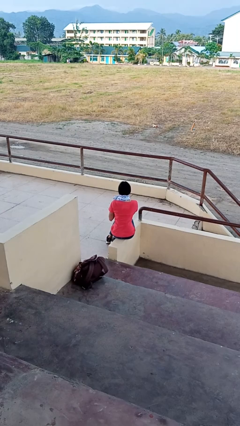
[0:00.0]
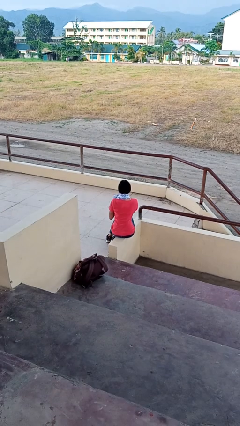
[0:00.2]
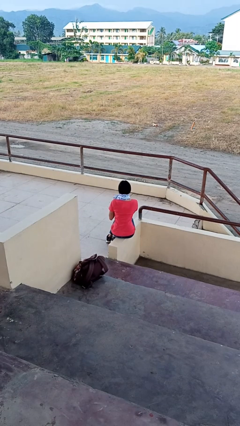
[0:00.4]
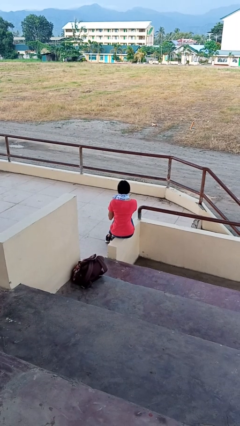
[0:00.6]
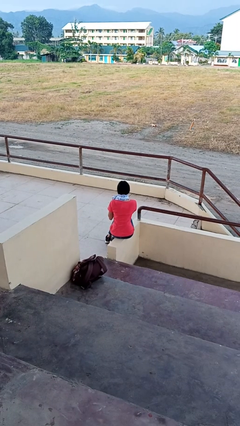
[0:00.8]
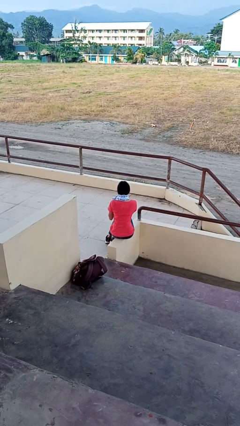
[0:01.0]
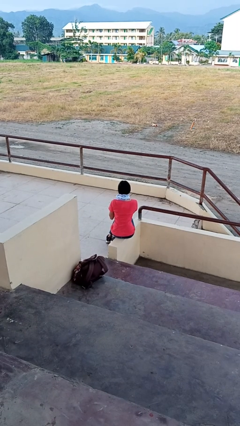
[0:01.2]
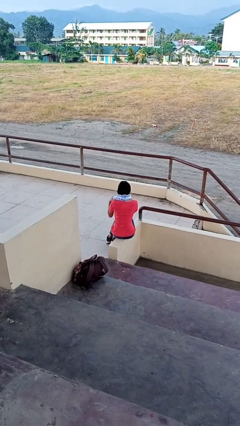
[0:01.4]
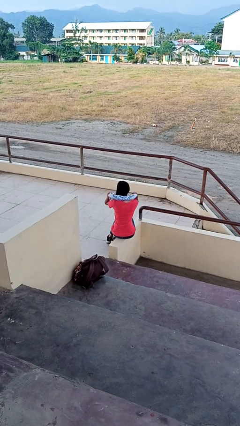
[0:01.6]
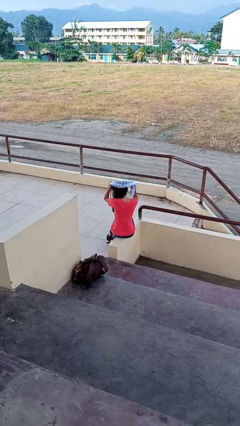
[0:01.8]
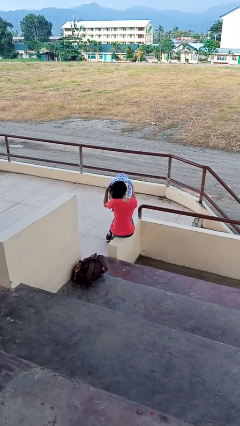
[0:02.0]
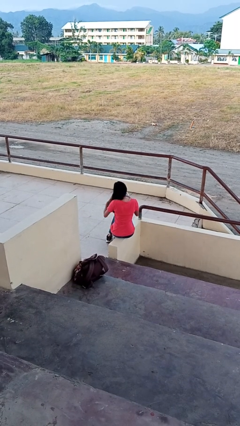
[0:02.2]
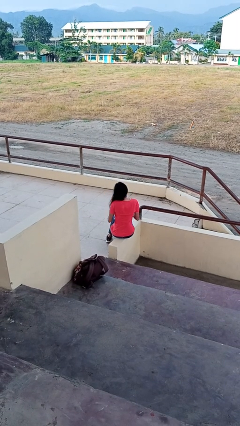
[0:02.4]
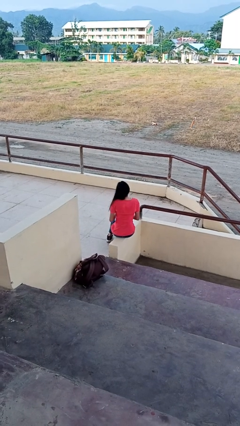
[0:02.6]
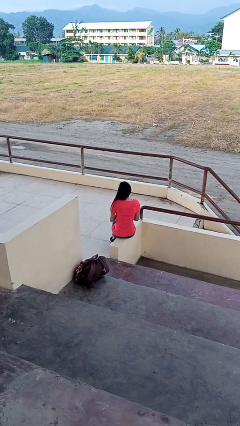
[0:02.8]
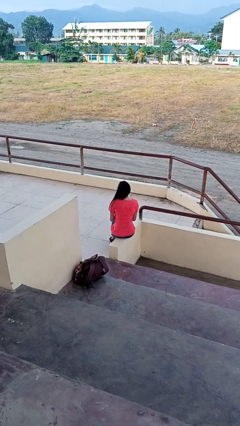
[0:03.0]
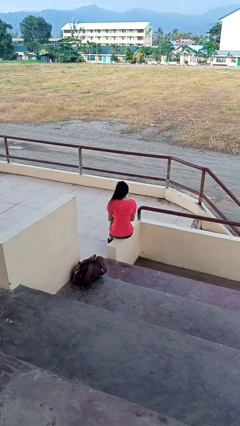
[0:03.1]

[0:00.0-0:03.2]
person takes off scarf

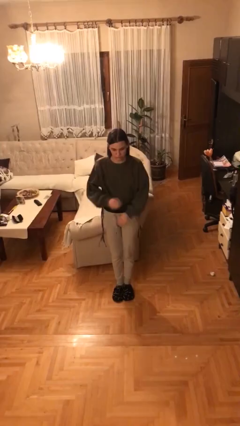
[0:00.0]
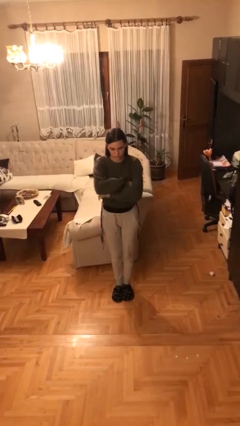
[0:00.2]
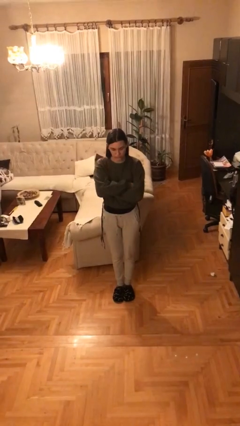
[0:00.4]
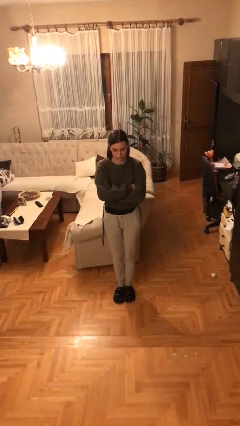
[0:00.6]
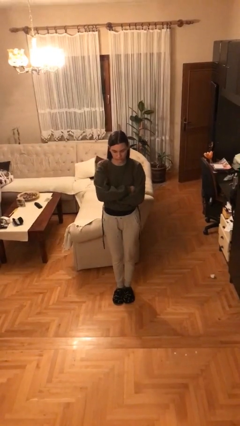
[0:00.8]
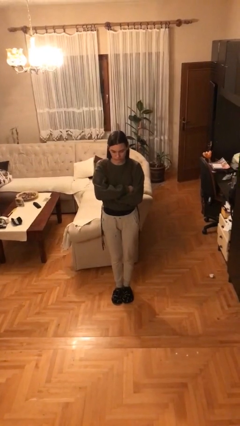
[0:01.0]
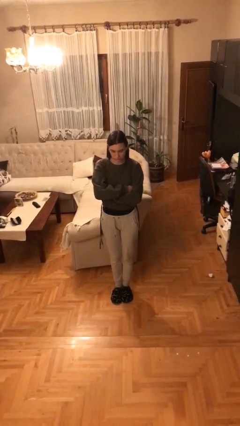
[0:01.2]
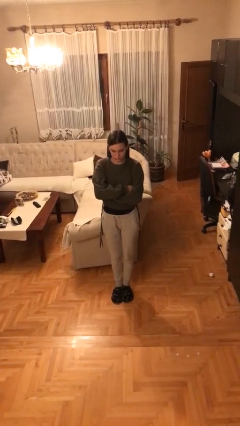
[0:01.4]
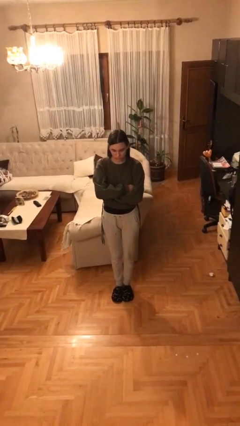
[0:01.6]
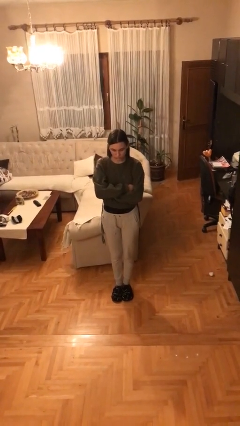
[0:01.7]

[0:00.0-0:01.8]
person crosses arms

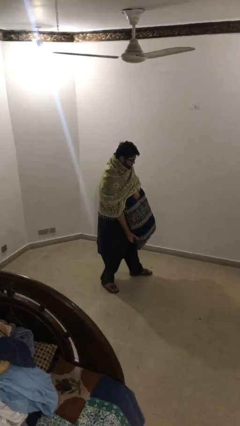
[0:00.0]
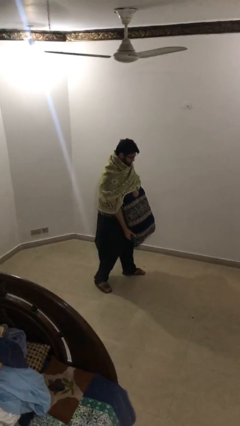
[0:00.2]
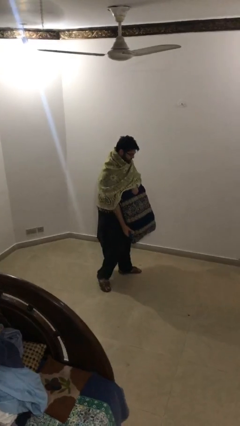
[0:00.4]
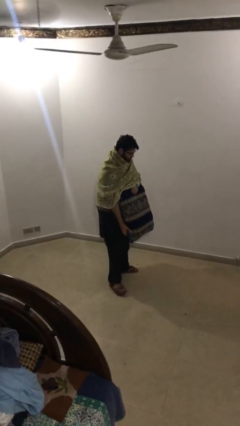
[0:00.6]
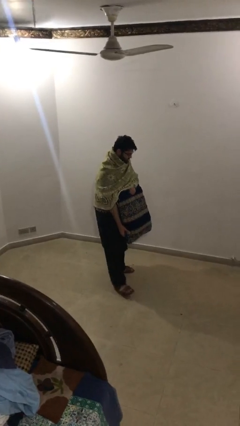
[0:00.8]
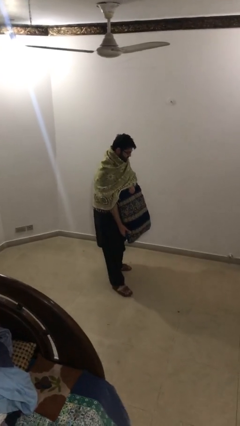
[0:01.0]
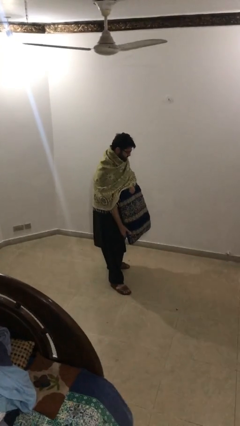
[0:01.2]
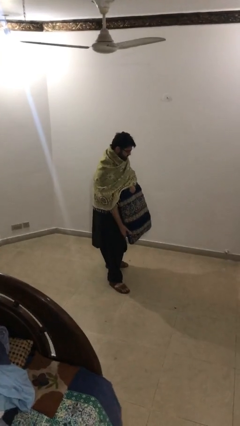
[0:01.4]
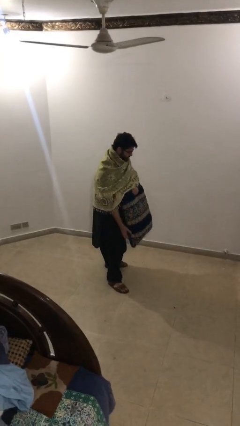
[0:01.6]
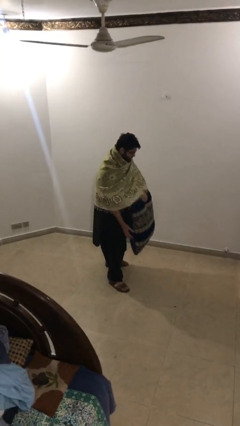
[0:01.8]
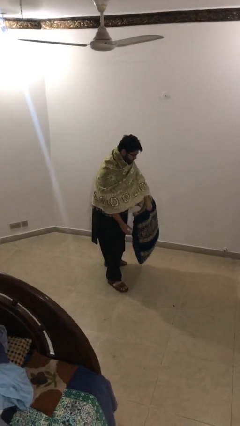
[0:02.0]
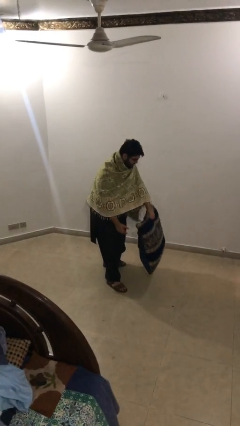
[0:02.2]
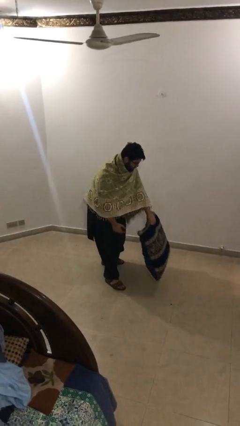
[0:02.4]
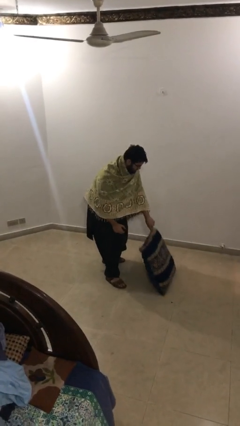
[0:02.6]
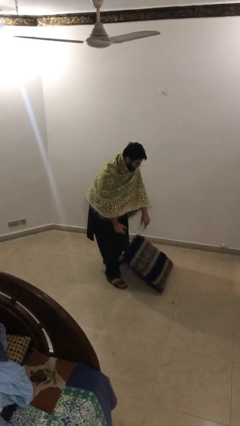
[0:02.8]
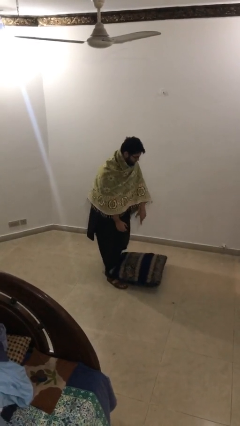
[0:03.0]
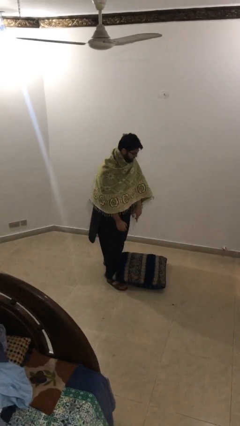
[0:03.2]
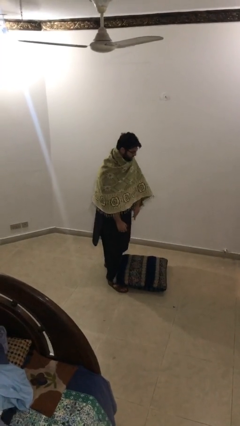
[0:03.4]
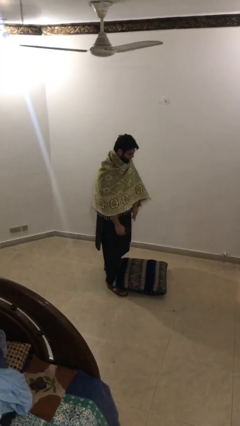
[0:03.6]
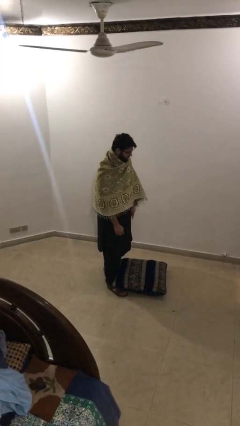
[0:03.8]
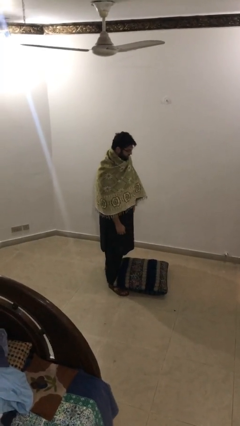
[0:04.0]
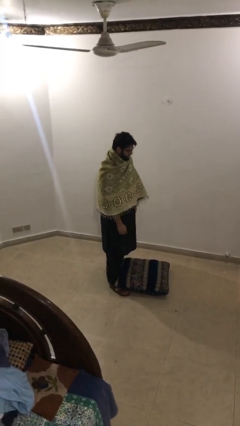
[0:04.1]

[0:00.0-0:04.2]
person puts down object on floor

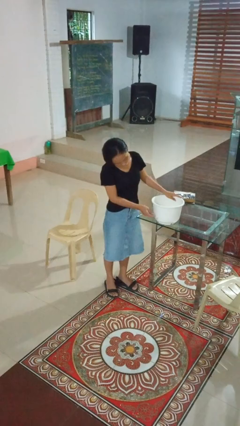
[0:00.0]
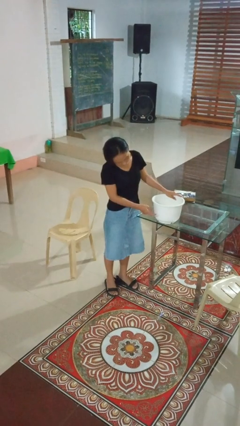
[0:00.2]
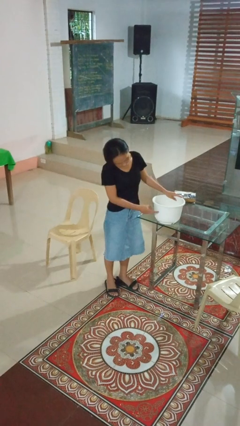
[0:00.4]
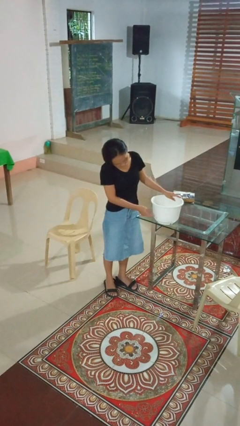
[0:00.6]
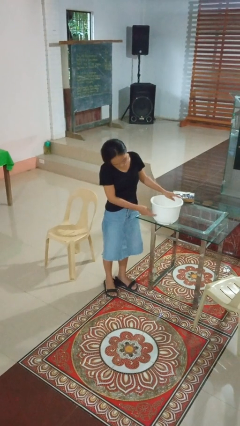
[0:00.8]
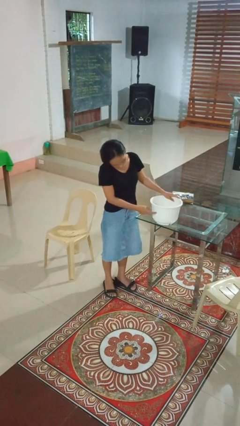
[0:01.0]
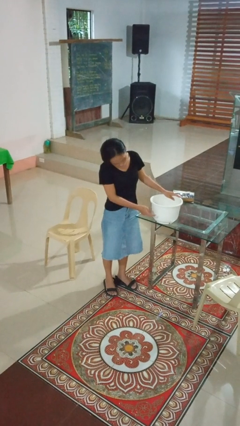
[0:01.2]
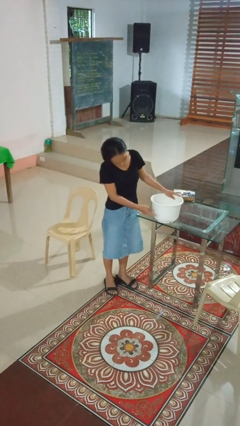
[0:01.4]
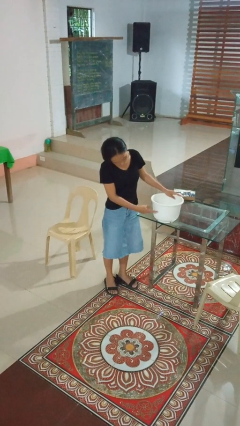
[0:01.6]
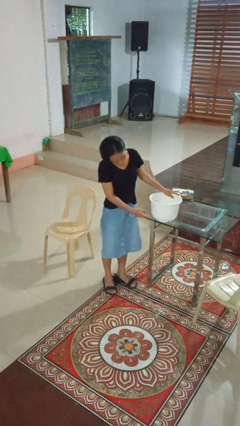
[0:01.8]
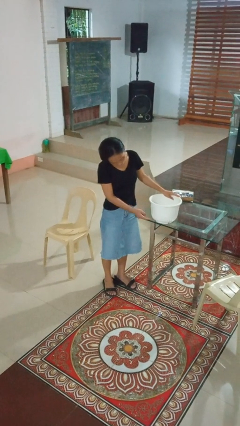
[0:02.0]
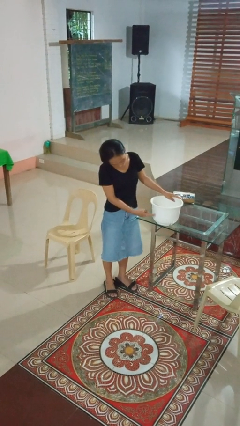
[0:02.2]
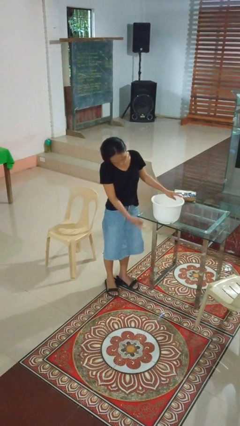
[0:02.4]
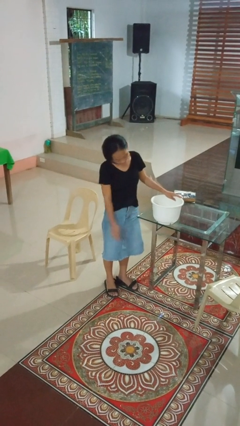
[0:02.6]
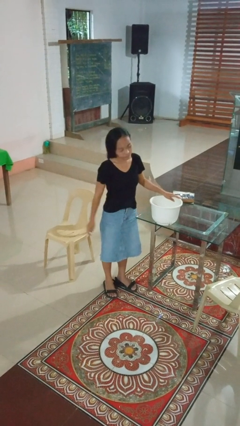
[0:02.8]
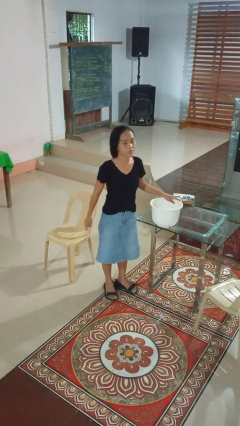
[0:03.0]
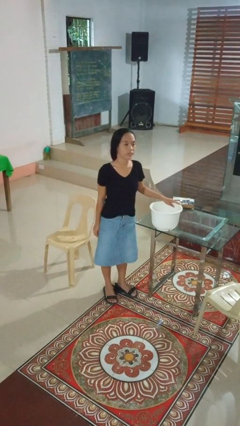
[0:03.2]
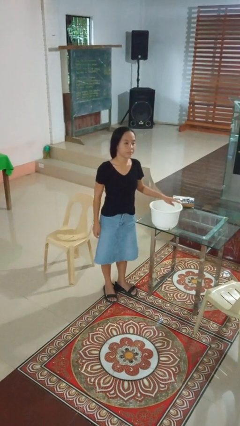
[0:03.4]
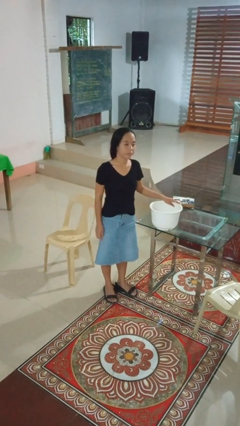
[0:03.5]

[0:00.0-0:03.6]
person taps object with finger

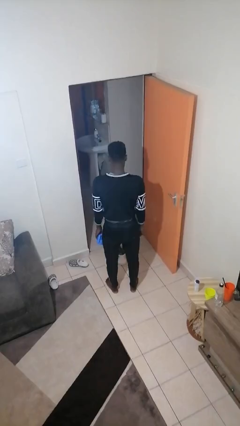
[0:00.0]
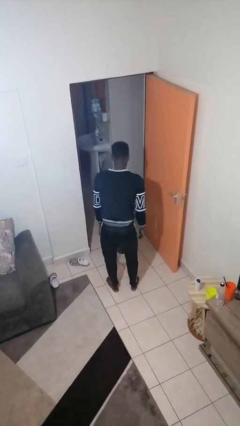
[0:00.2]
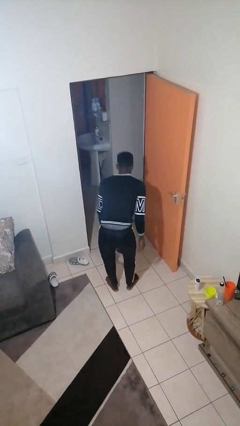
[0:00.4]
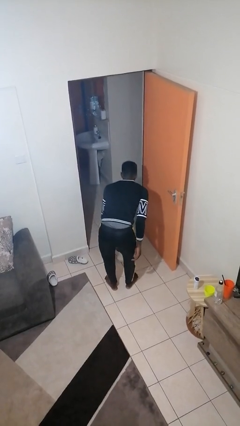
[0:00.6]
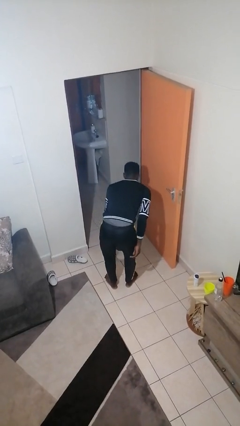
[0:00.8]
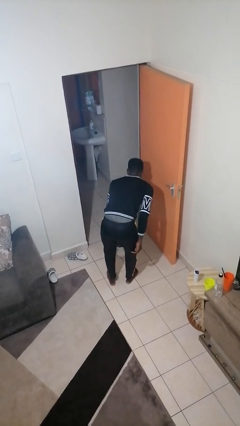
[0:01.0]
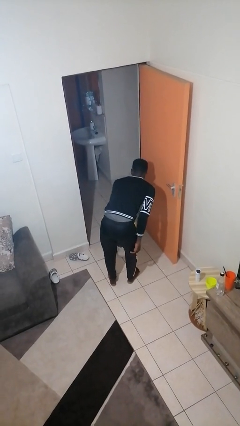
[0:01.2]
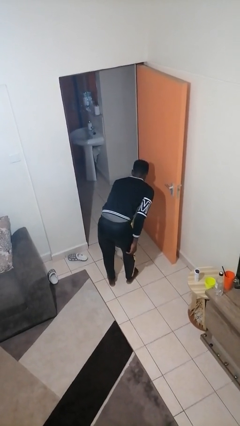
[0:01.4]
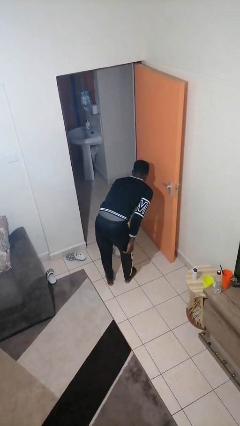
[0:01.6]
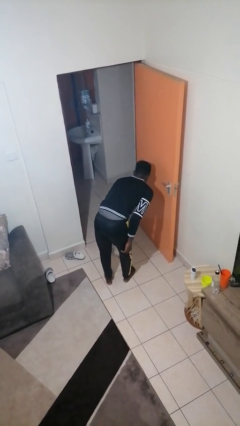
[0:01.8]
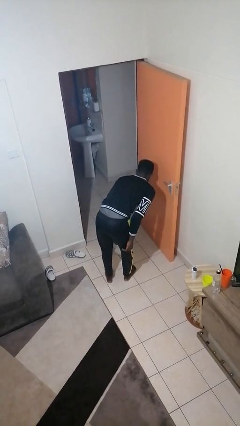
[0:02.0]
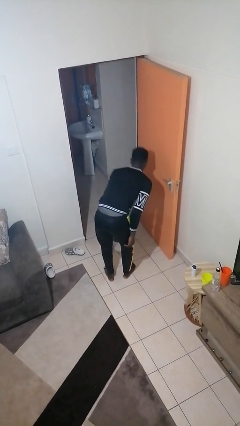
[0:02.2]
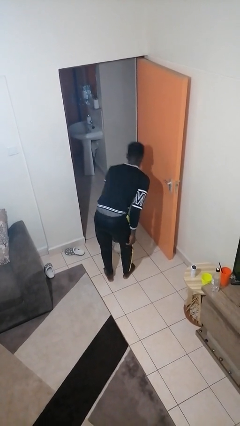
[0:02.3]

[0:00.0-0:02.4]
person waters houseplant

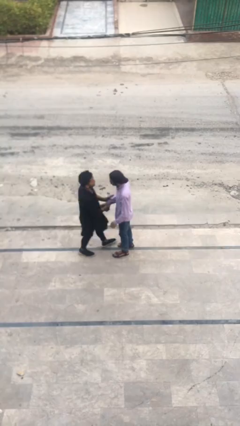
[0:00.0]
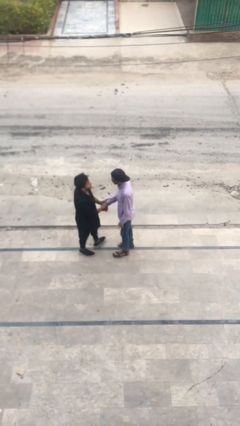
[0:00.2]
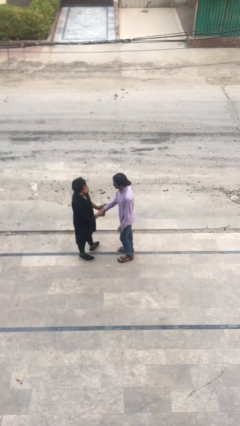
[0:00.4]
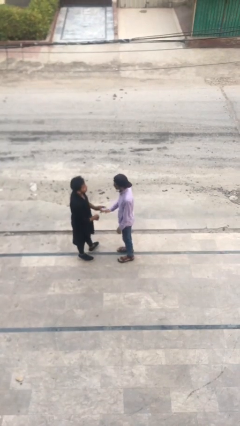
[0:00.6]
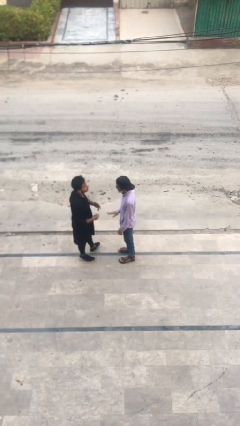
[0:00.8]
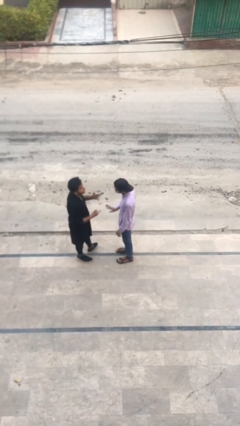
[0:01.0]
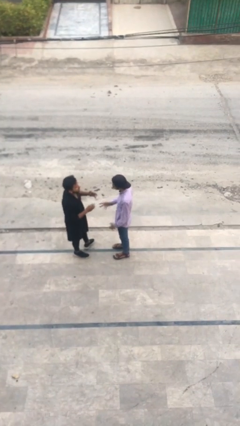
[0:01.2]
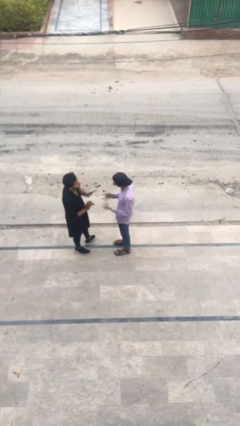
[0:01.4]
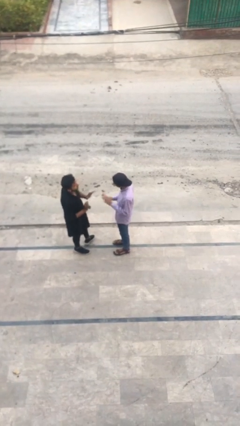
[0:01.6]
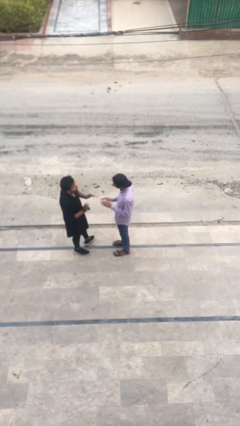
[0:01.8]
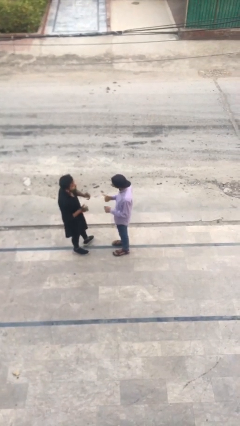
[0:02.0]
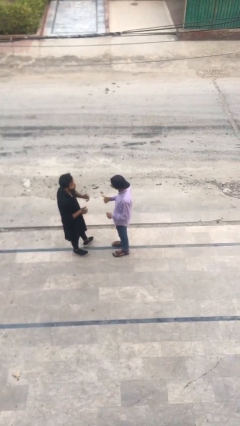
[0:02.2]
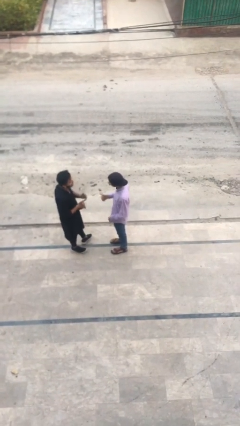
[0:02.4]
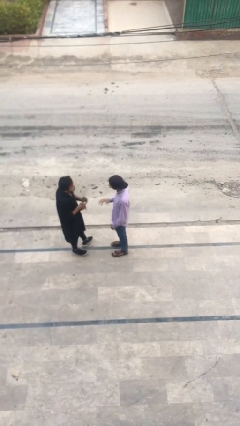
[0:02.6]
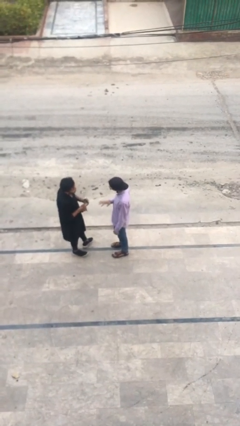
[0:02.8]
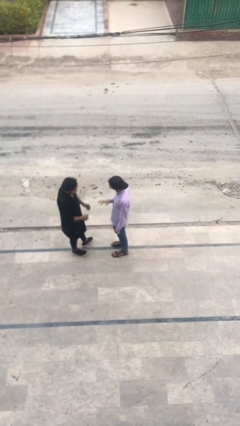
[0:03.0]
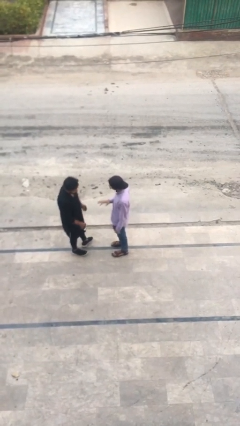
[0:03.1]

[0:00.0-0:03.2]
person talks to person
